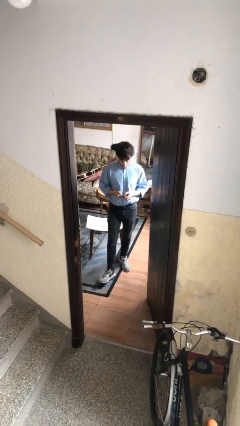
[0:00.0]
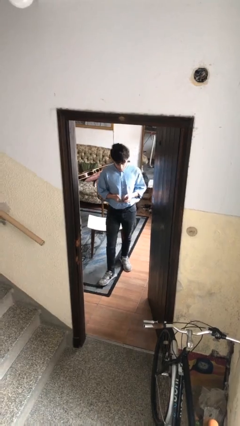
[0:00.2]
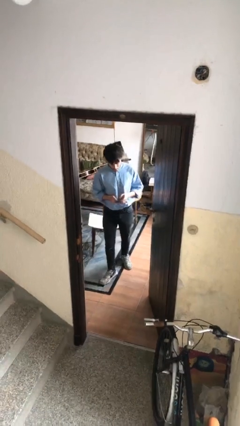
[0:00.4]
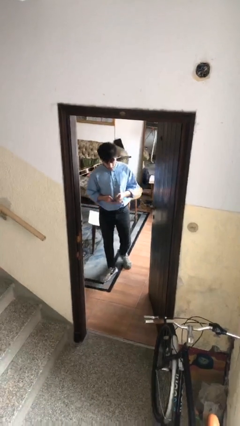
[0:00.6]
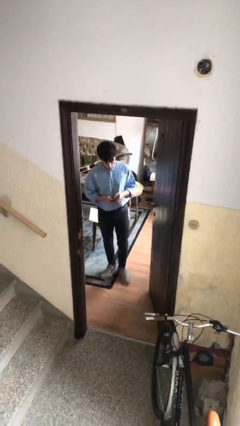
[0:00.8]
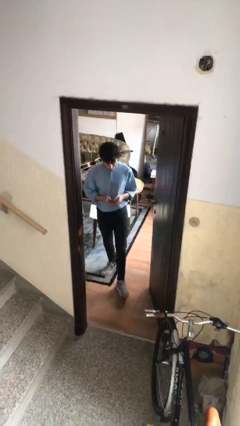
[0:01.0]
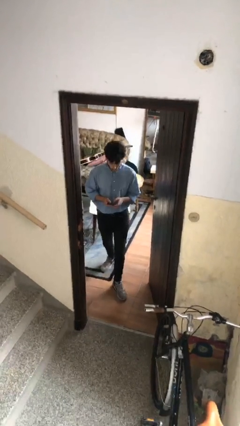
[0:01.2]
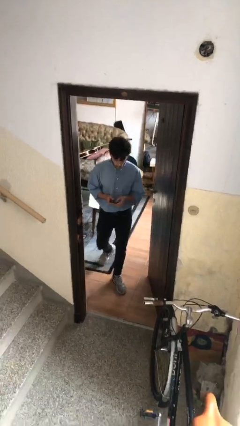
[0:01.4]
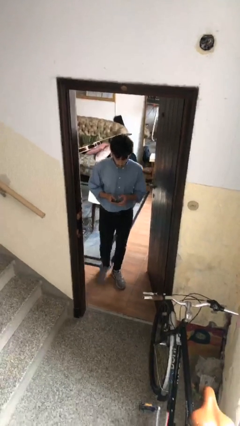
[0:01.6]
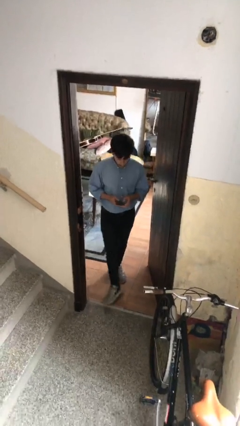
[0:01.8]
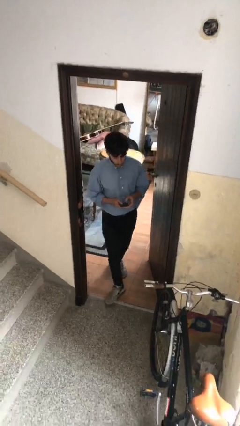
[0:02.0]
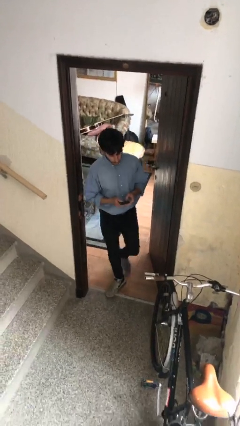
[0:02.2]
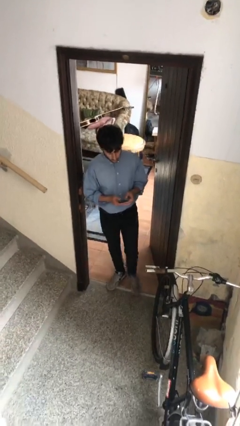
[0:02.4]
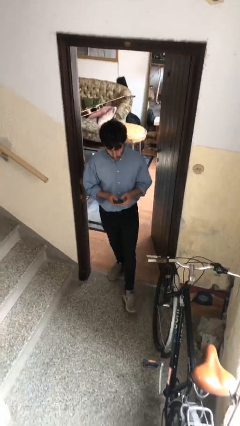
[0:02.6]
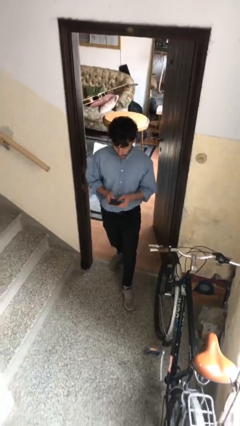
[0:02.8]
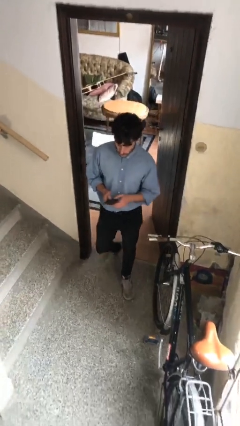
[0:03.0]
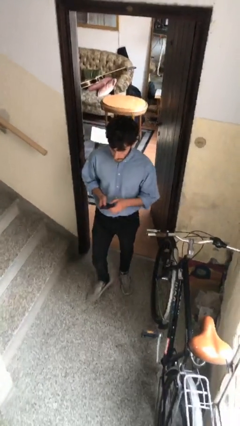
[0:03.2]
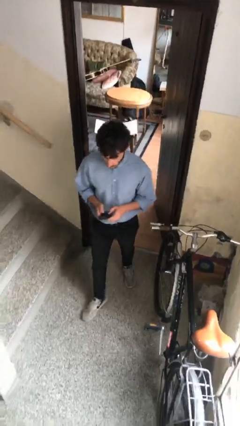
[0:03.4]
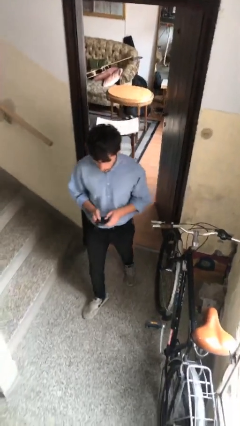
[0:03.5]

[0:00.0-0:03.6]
person texts on phone

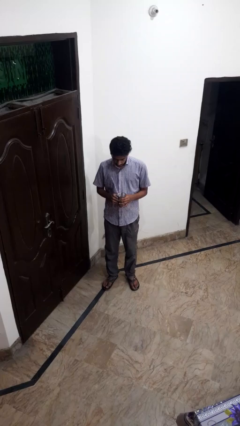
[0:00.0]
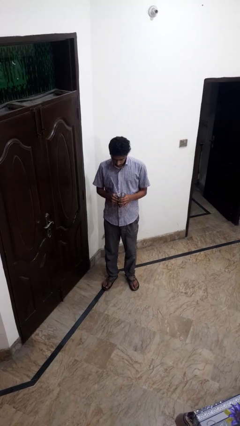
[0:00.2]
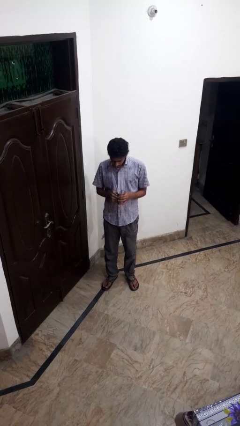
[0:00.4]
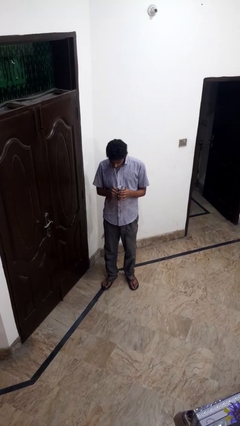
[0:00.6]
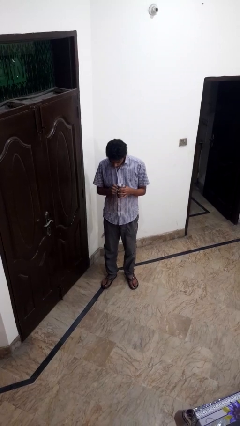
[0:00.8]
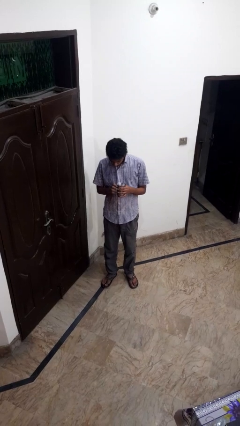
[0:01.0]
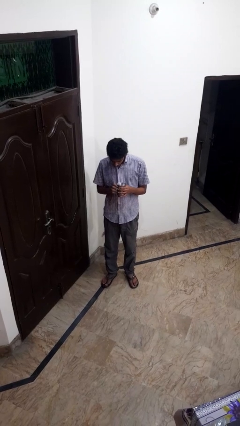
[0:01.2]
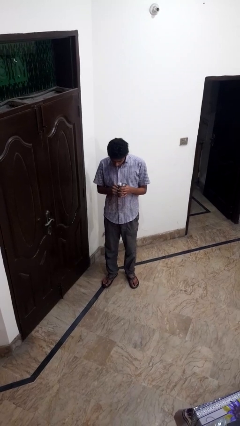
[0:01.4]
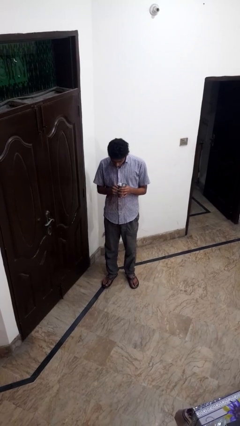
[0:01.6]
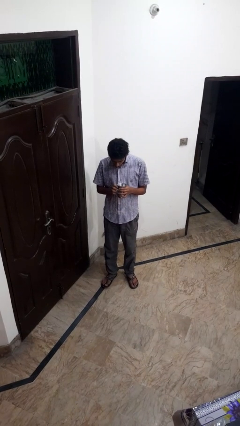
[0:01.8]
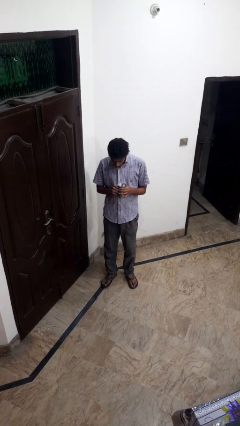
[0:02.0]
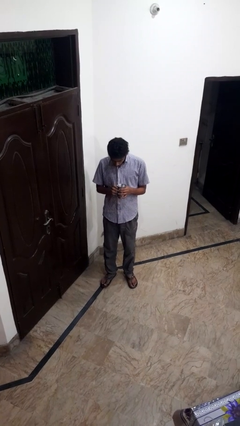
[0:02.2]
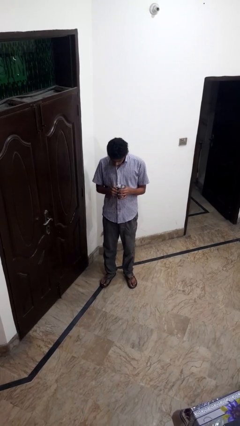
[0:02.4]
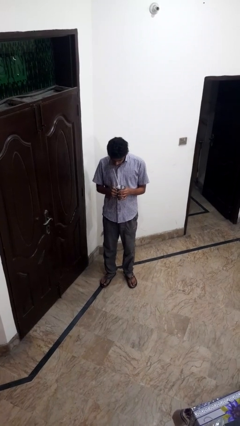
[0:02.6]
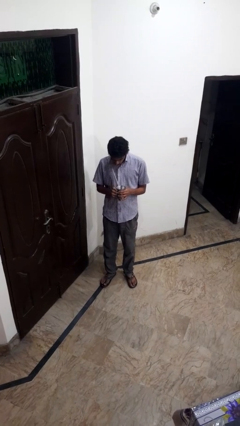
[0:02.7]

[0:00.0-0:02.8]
person drinks from straw

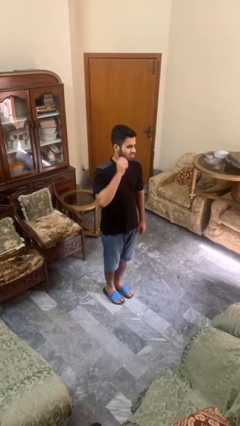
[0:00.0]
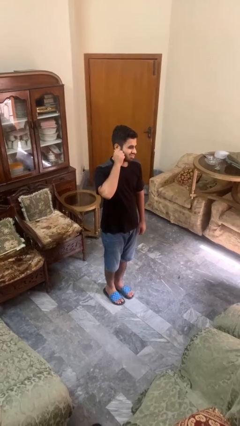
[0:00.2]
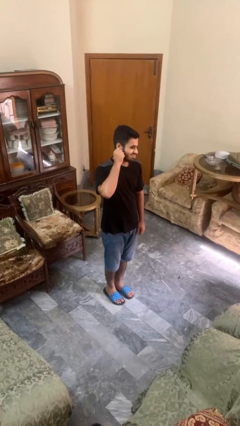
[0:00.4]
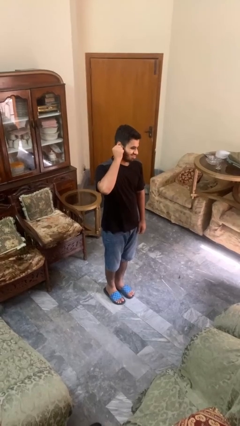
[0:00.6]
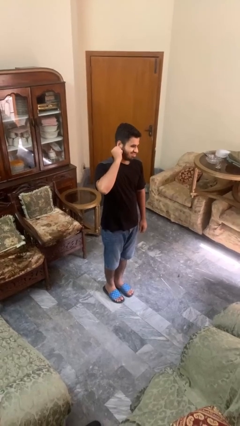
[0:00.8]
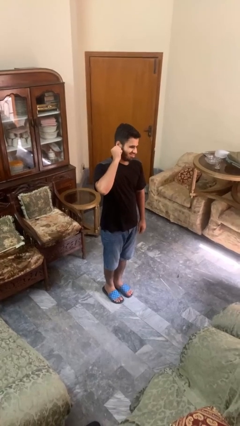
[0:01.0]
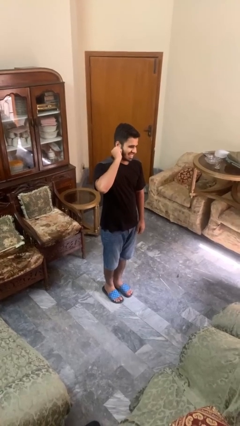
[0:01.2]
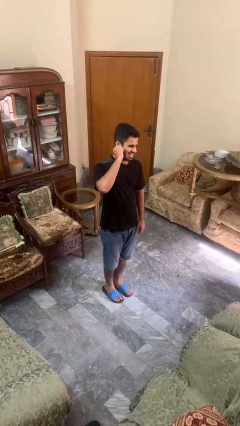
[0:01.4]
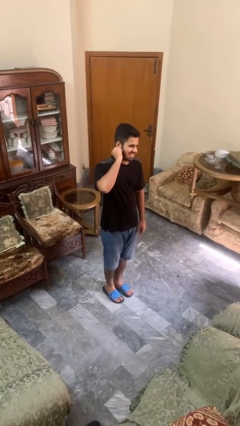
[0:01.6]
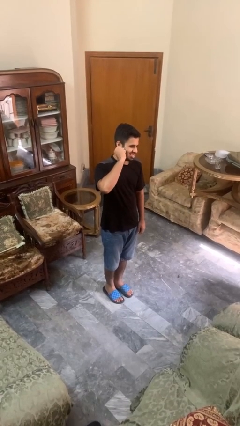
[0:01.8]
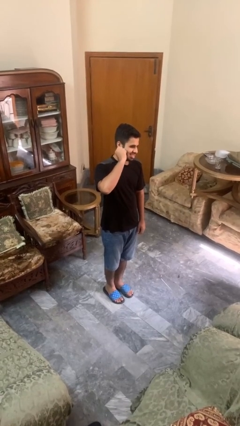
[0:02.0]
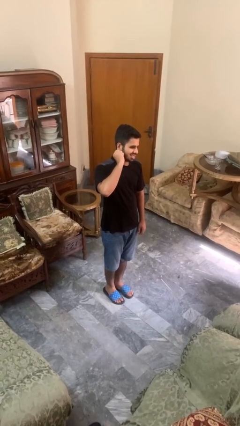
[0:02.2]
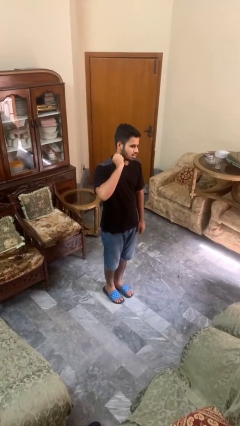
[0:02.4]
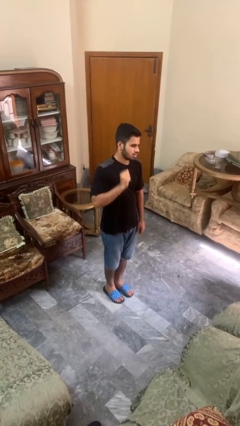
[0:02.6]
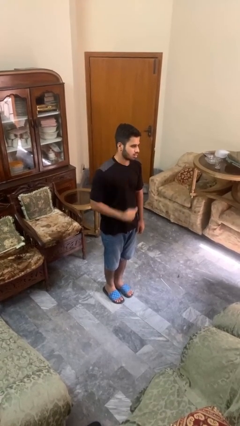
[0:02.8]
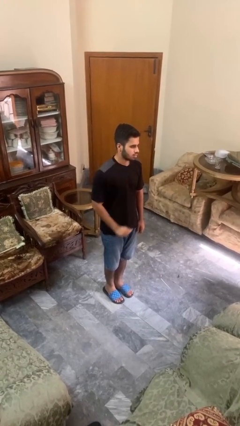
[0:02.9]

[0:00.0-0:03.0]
person touches earlobe

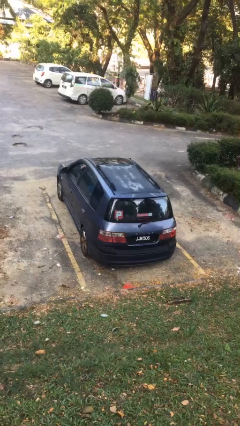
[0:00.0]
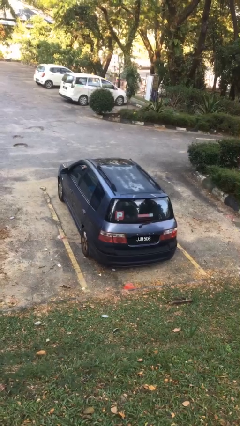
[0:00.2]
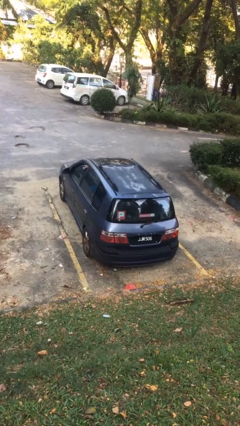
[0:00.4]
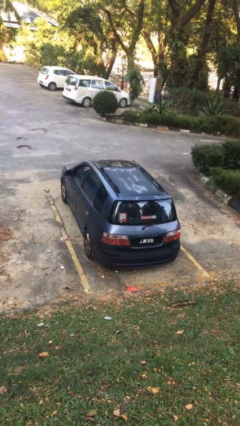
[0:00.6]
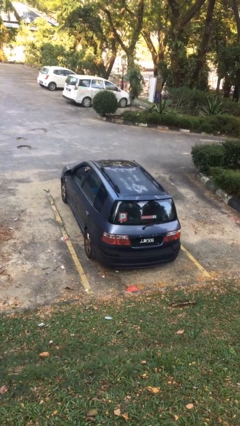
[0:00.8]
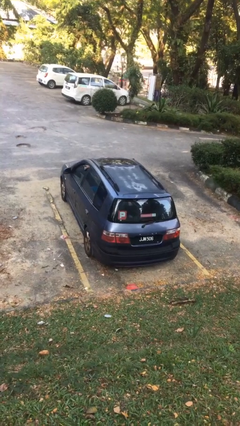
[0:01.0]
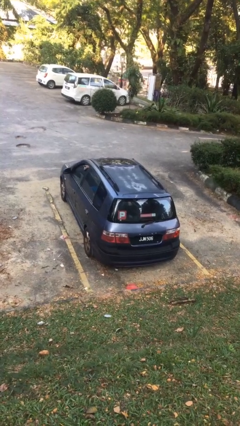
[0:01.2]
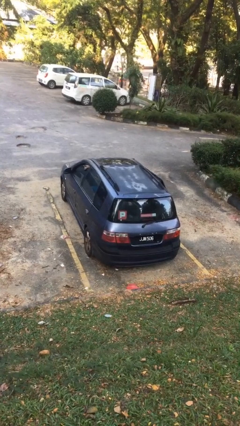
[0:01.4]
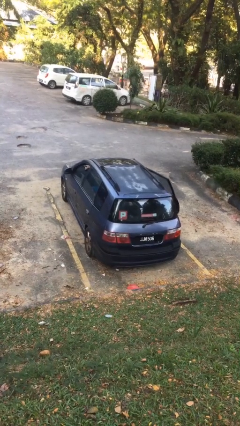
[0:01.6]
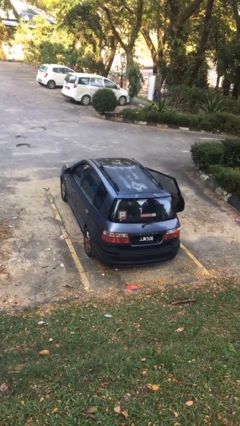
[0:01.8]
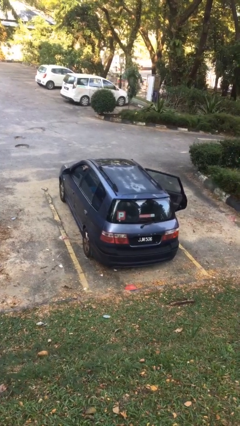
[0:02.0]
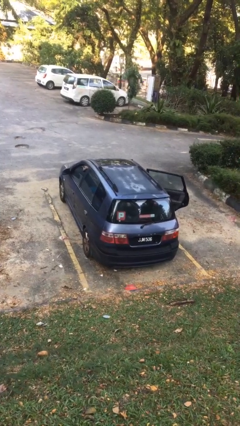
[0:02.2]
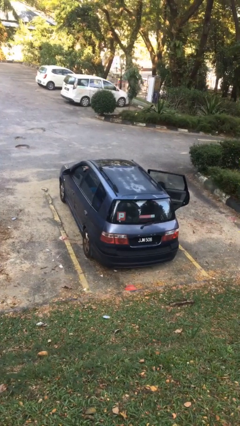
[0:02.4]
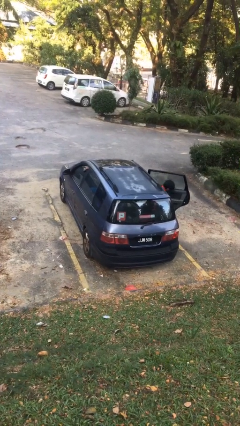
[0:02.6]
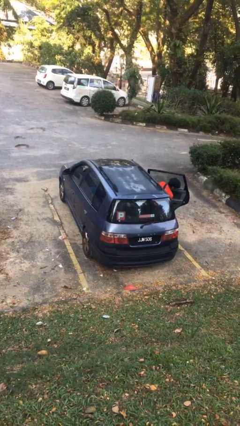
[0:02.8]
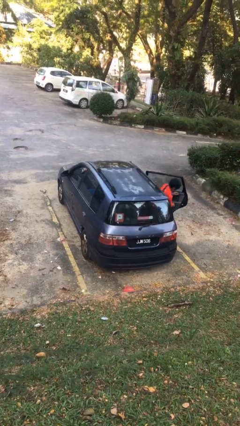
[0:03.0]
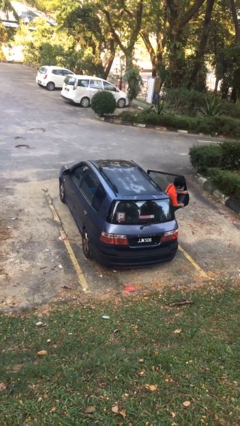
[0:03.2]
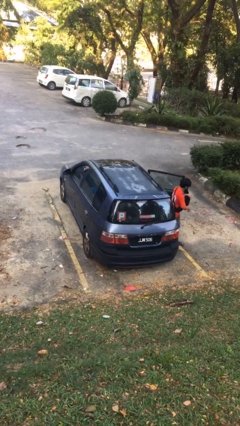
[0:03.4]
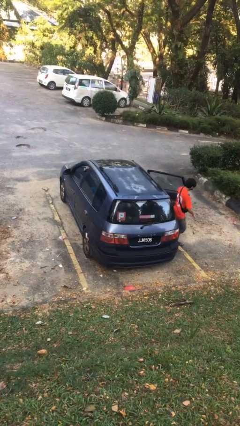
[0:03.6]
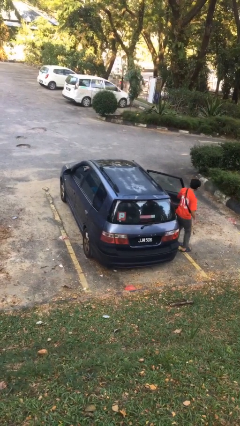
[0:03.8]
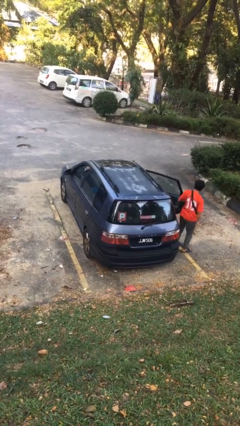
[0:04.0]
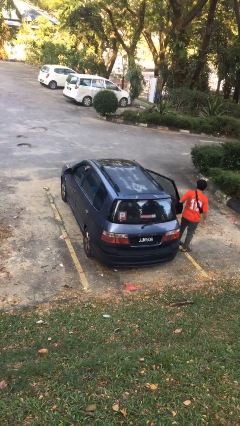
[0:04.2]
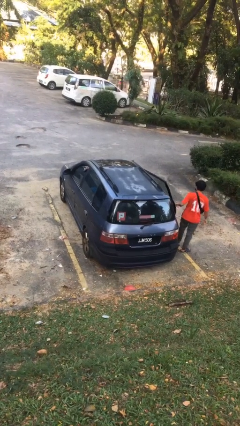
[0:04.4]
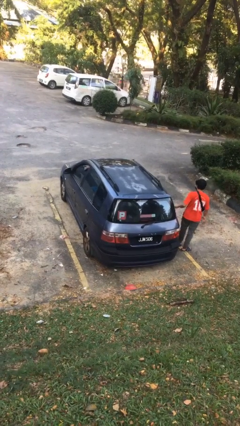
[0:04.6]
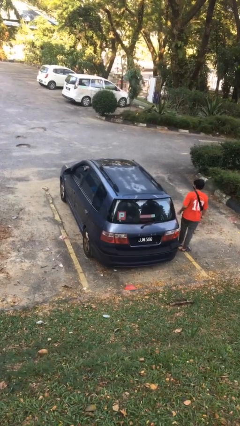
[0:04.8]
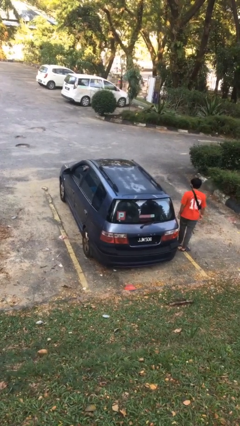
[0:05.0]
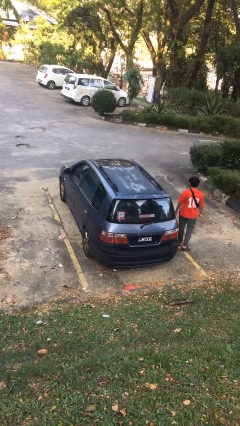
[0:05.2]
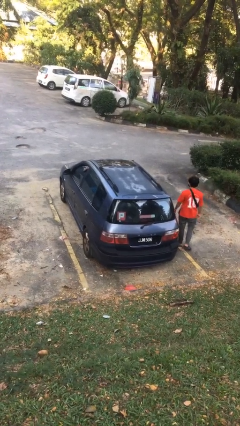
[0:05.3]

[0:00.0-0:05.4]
car drops off person

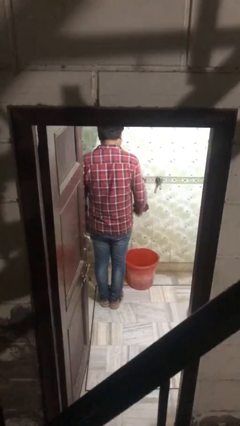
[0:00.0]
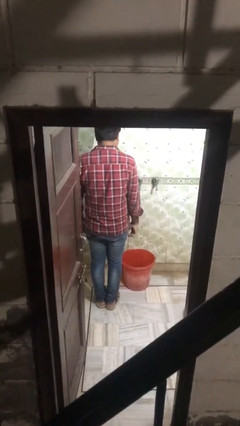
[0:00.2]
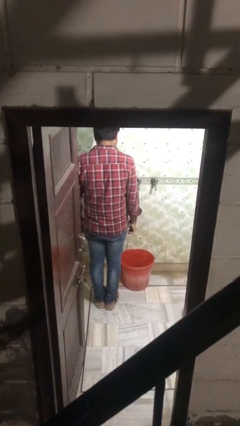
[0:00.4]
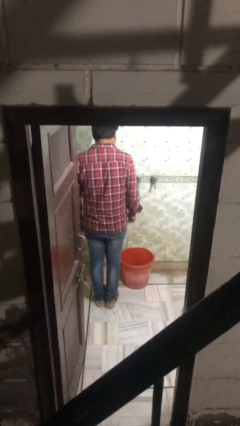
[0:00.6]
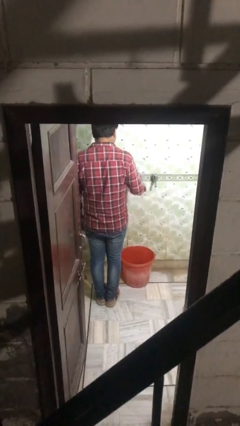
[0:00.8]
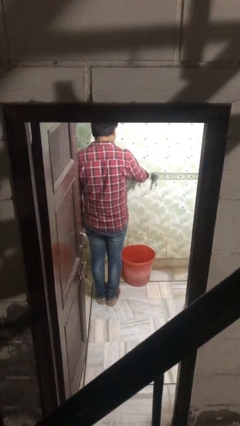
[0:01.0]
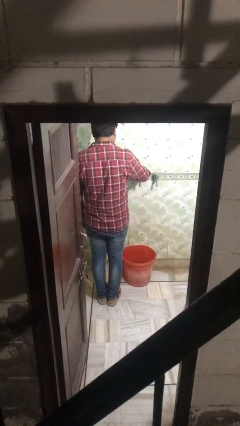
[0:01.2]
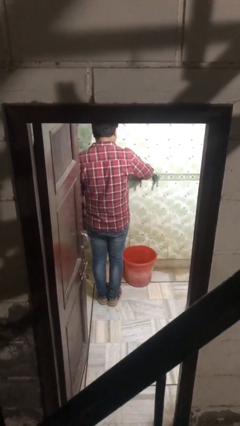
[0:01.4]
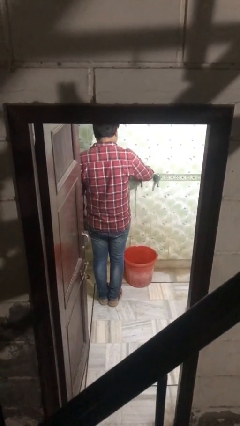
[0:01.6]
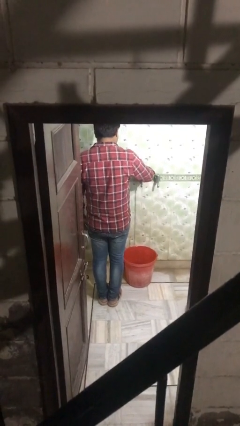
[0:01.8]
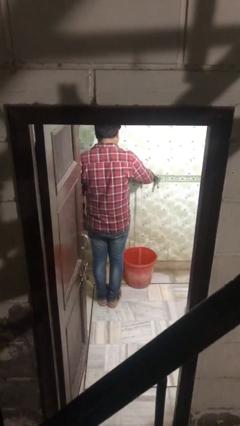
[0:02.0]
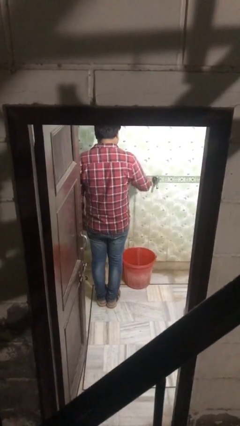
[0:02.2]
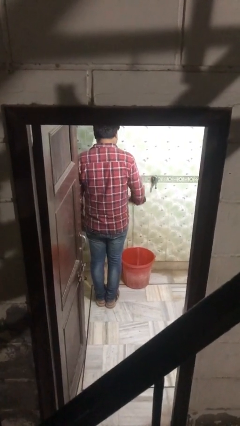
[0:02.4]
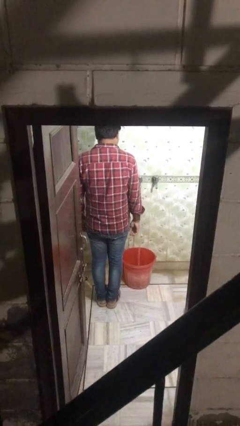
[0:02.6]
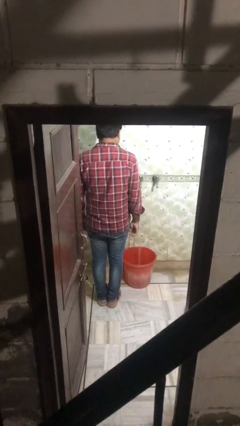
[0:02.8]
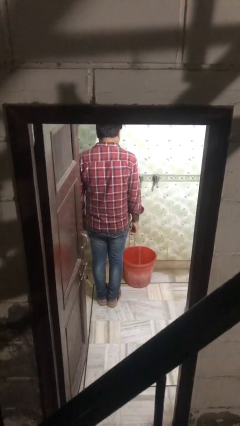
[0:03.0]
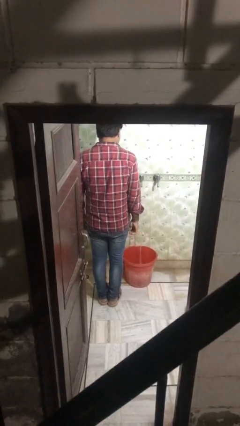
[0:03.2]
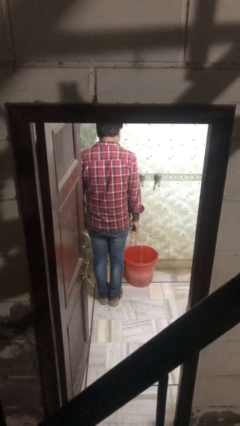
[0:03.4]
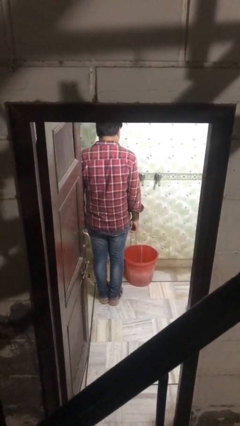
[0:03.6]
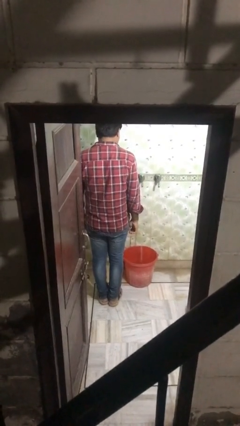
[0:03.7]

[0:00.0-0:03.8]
person turns on faucet
